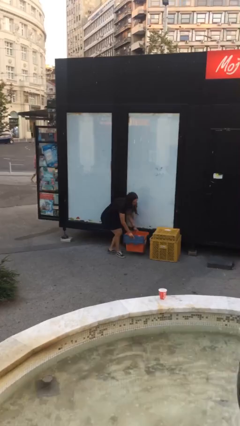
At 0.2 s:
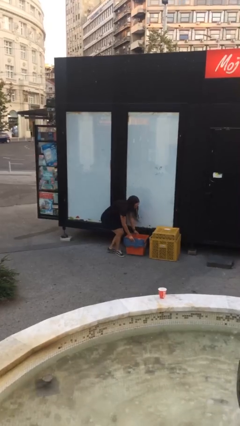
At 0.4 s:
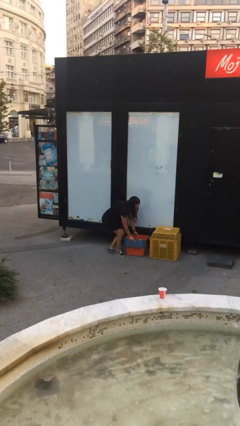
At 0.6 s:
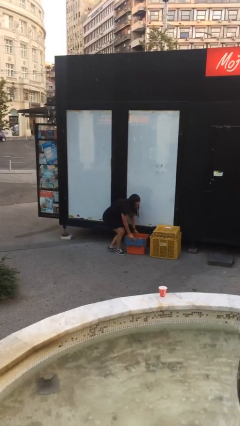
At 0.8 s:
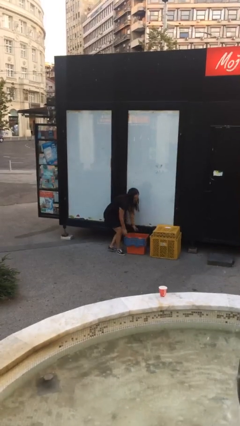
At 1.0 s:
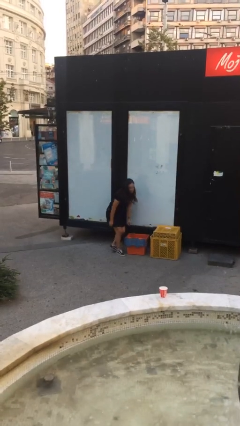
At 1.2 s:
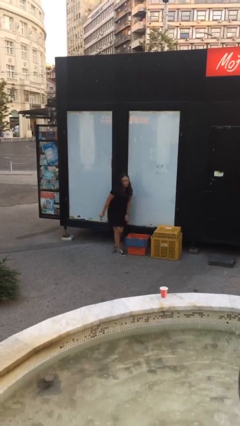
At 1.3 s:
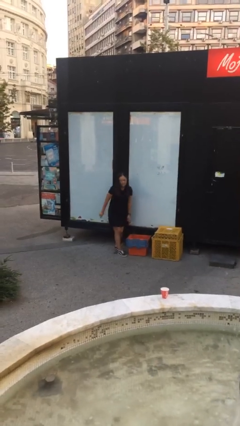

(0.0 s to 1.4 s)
person puts down object on floor

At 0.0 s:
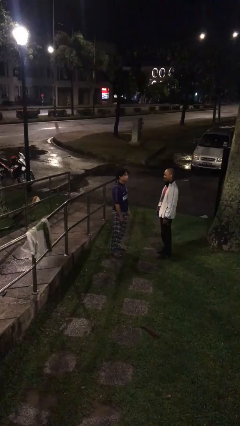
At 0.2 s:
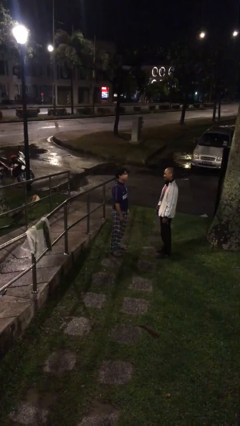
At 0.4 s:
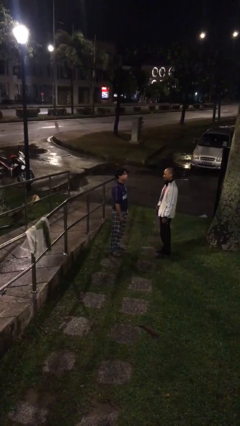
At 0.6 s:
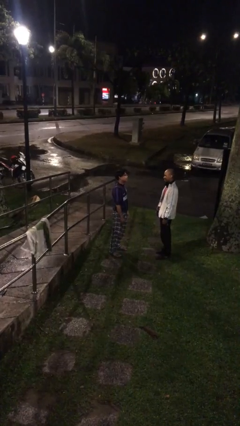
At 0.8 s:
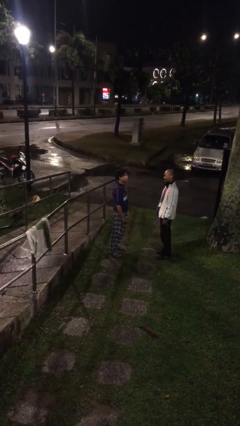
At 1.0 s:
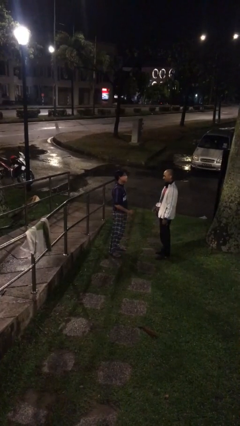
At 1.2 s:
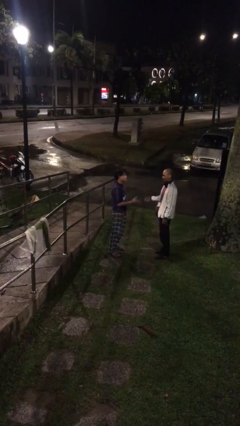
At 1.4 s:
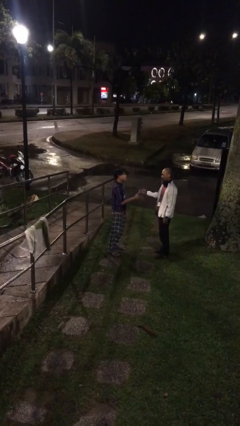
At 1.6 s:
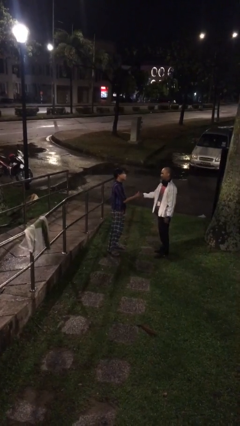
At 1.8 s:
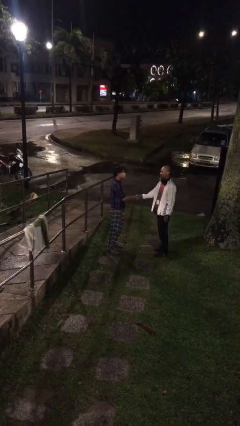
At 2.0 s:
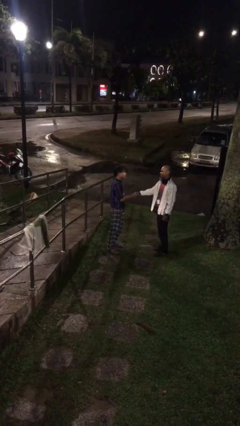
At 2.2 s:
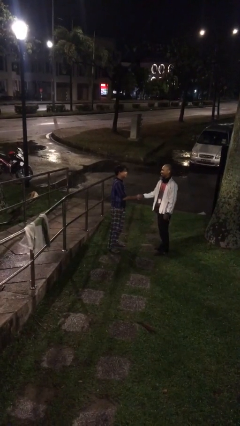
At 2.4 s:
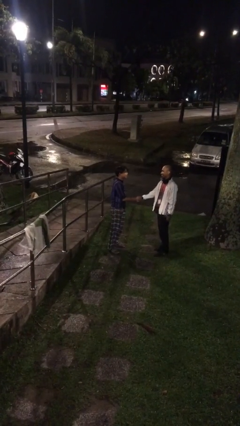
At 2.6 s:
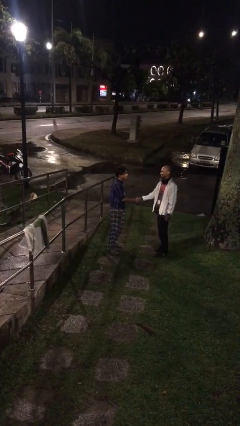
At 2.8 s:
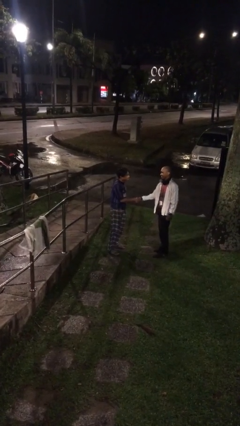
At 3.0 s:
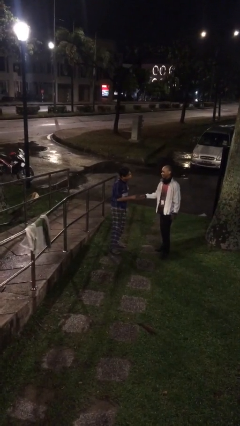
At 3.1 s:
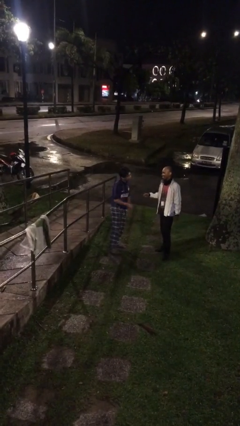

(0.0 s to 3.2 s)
person shakes hand

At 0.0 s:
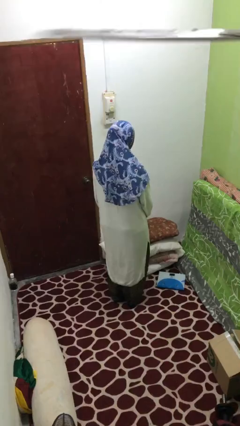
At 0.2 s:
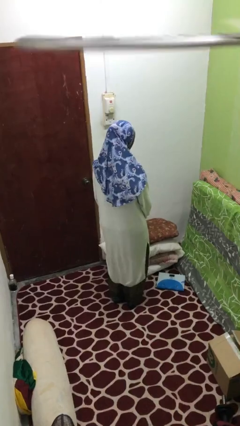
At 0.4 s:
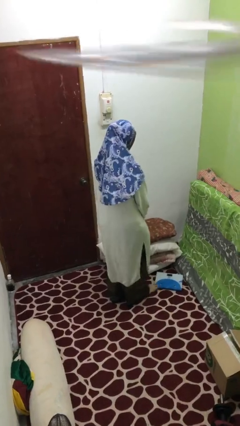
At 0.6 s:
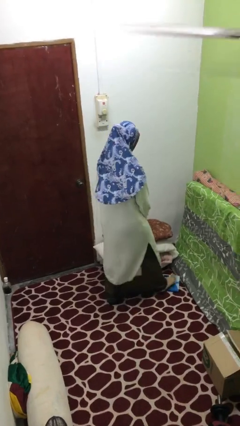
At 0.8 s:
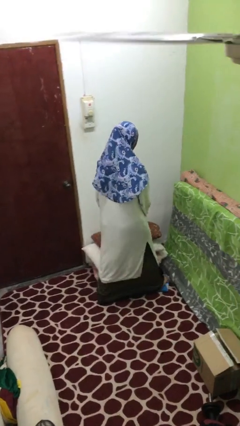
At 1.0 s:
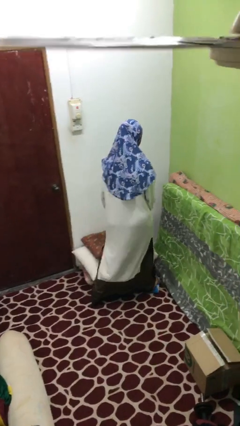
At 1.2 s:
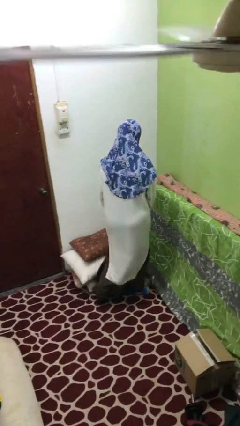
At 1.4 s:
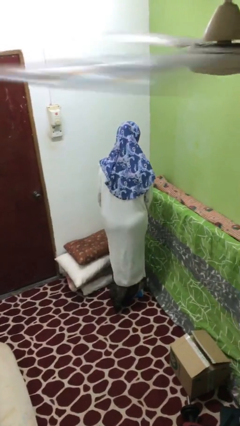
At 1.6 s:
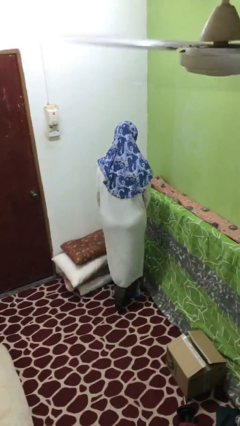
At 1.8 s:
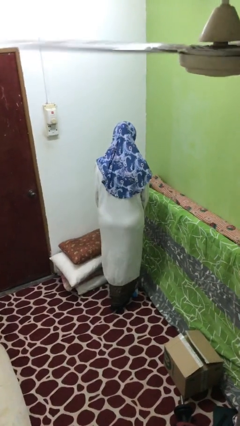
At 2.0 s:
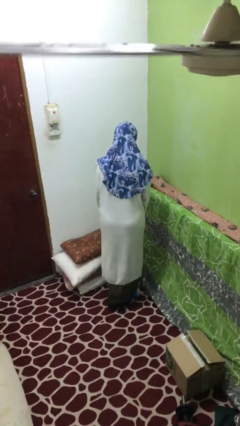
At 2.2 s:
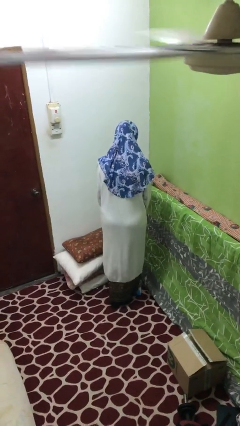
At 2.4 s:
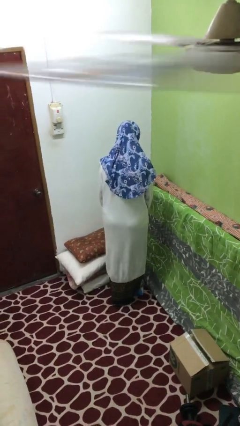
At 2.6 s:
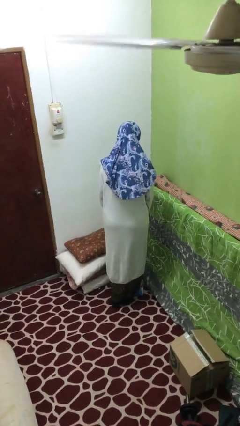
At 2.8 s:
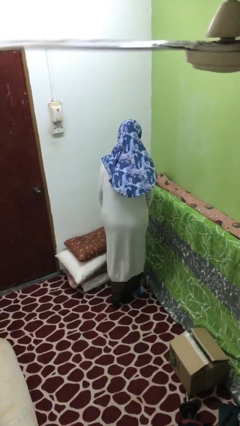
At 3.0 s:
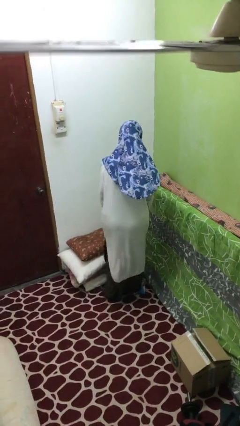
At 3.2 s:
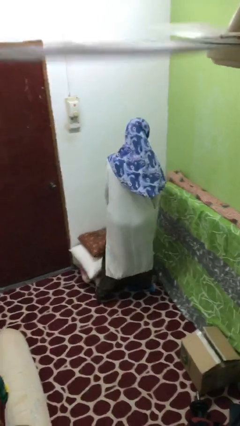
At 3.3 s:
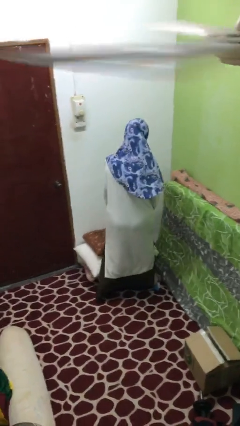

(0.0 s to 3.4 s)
person uses bodyweight scale

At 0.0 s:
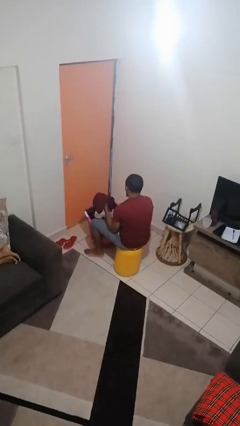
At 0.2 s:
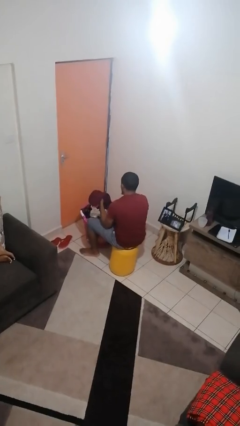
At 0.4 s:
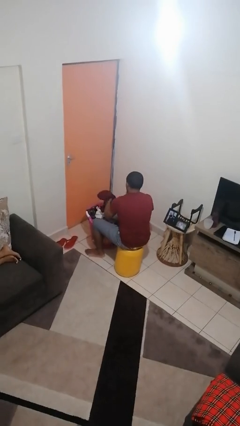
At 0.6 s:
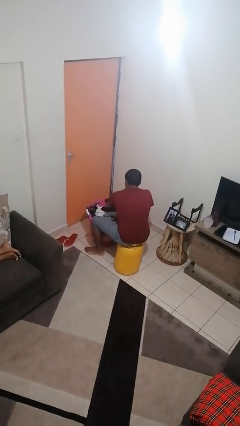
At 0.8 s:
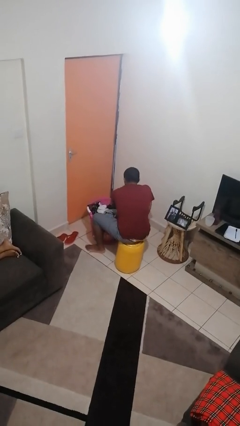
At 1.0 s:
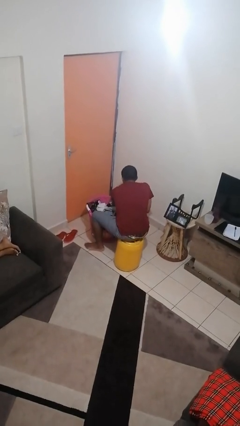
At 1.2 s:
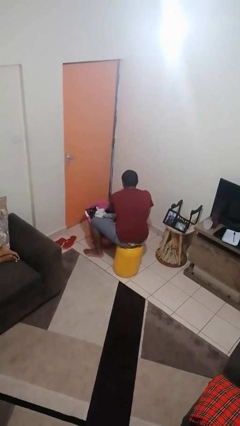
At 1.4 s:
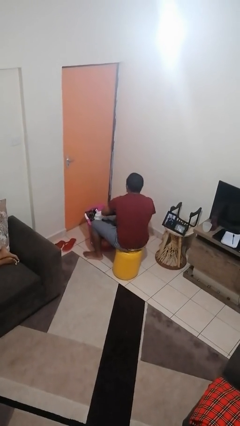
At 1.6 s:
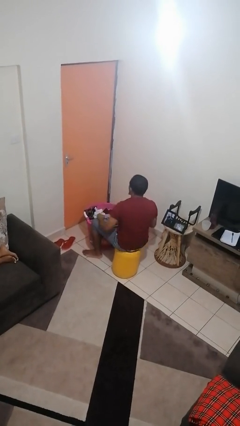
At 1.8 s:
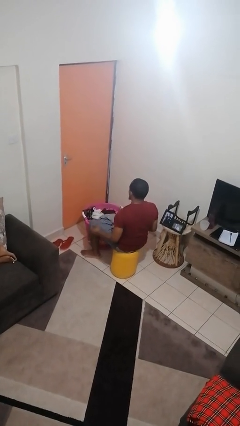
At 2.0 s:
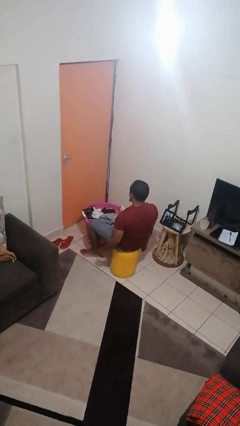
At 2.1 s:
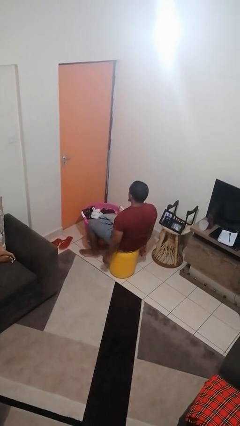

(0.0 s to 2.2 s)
person puts object into basket

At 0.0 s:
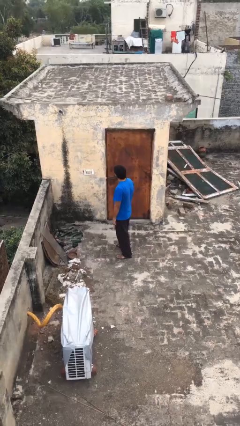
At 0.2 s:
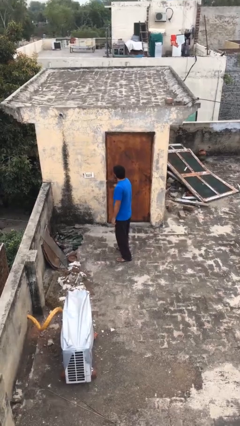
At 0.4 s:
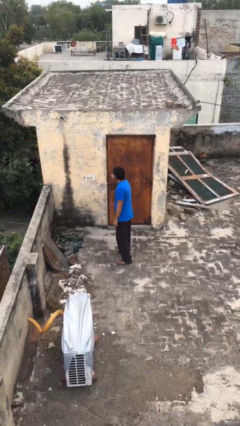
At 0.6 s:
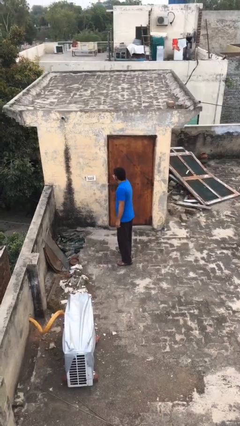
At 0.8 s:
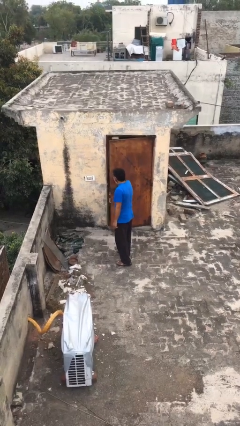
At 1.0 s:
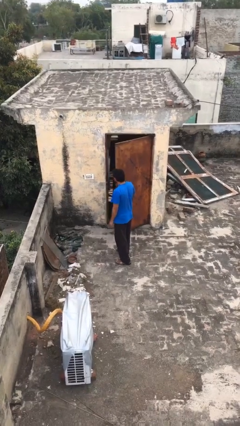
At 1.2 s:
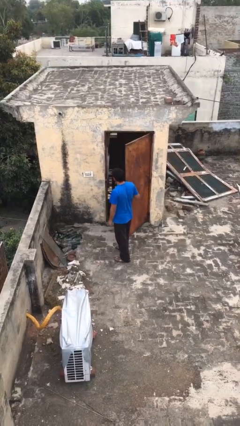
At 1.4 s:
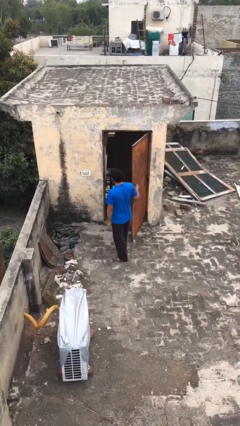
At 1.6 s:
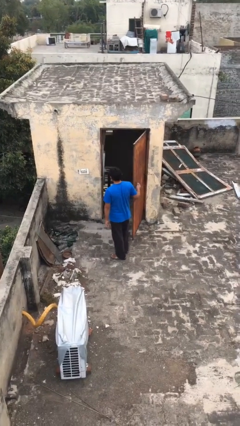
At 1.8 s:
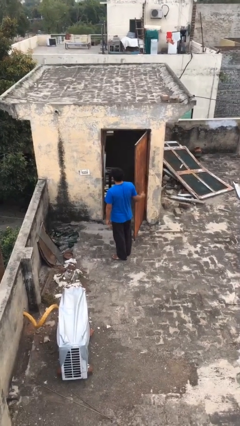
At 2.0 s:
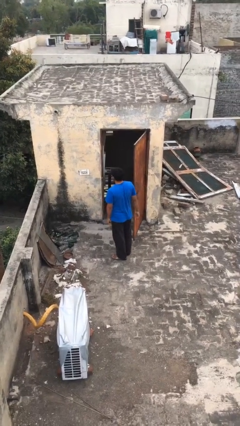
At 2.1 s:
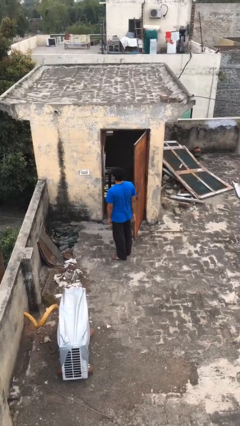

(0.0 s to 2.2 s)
person opens facility door

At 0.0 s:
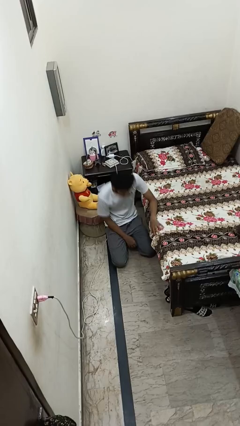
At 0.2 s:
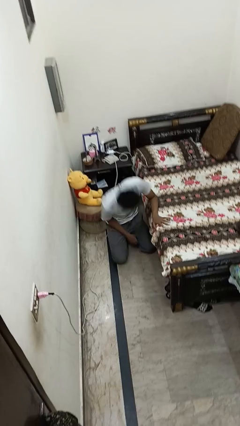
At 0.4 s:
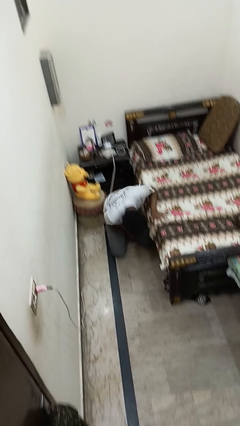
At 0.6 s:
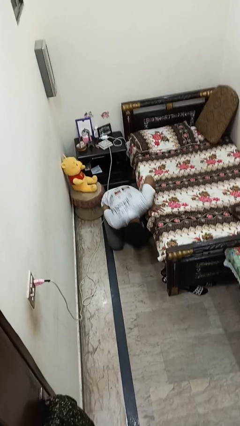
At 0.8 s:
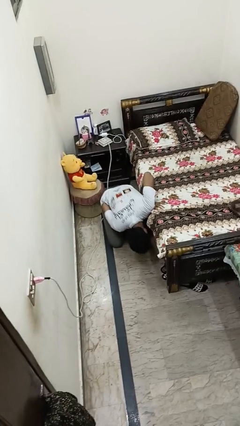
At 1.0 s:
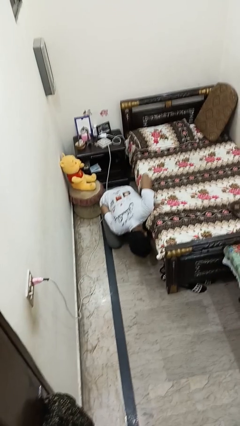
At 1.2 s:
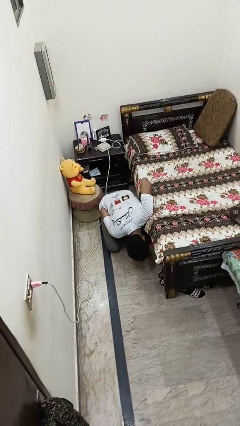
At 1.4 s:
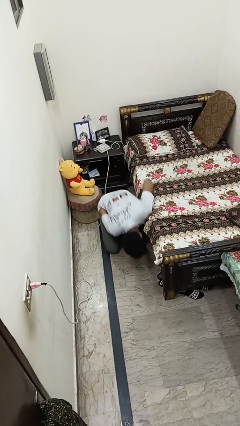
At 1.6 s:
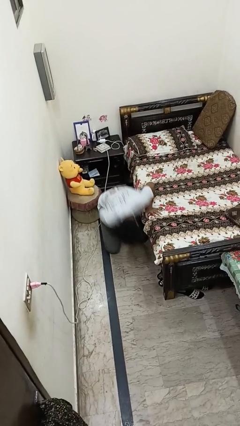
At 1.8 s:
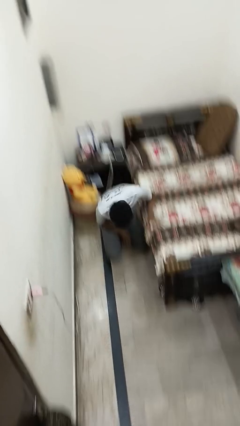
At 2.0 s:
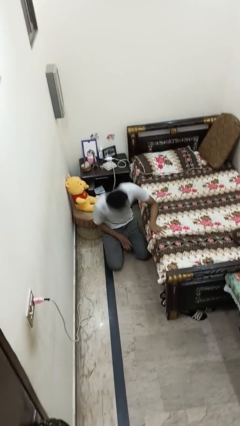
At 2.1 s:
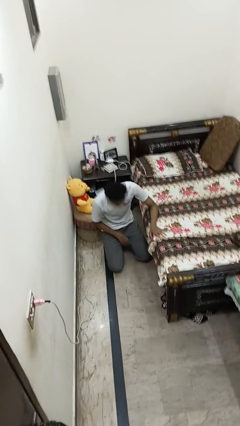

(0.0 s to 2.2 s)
person searches under bed

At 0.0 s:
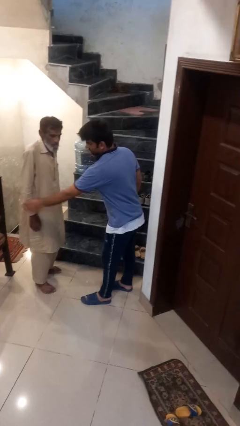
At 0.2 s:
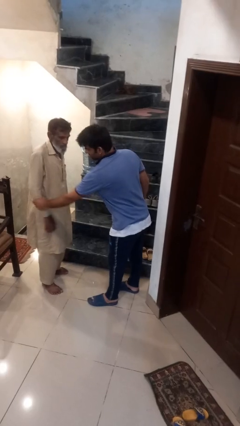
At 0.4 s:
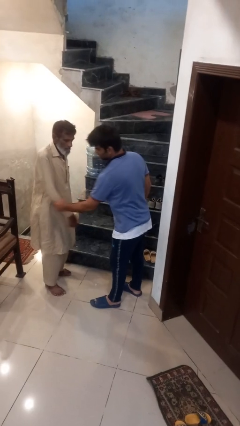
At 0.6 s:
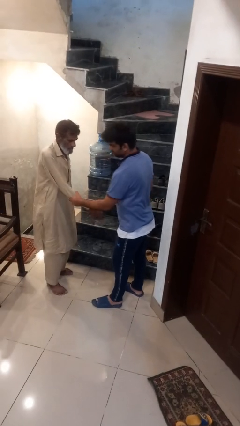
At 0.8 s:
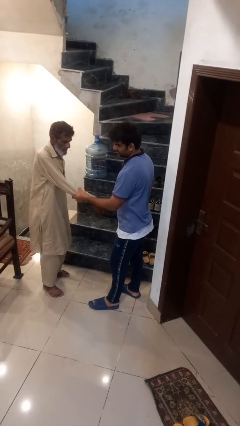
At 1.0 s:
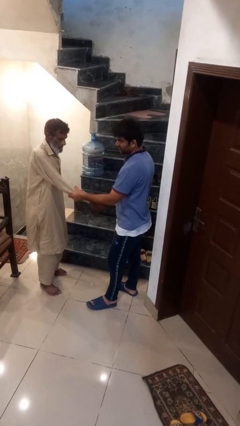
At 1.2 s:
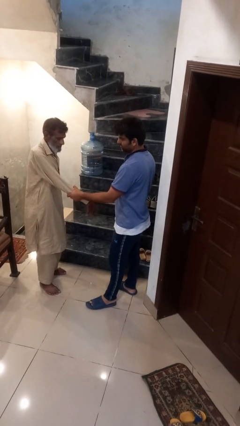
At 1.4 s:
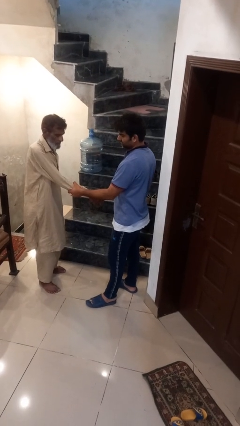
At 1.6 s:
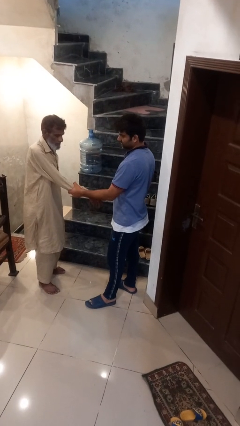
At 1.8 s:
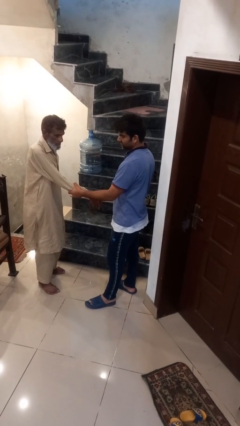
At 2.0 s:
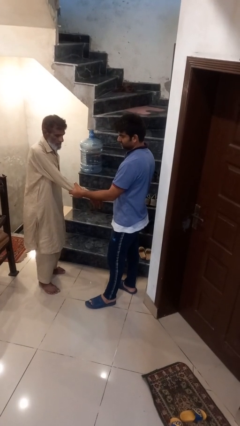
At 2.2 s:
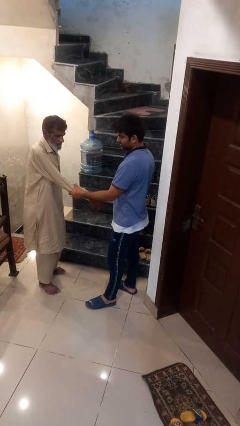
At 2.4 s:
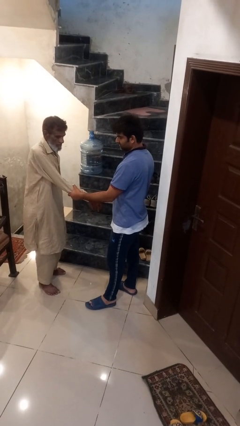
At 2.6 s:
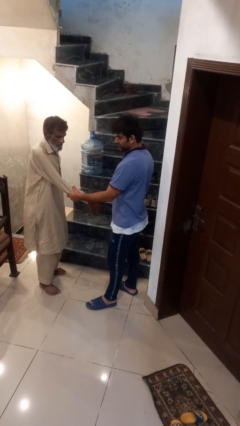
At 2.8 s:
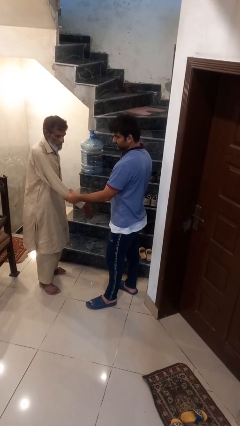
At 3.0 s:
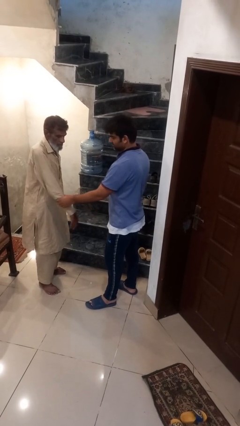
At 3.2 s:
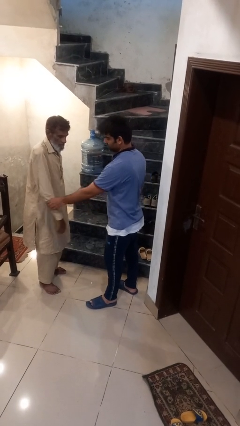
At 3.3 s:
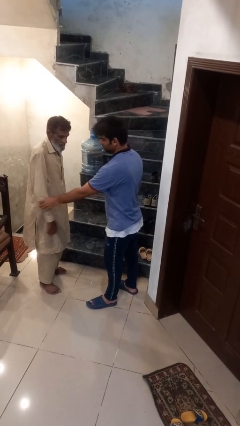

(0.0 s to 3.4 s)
person grabs person by forearm
